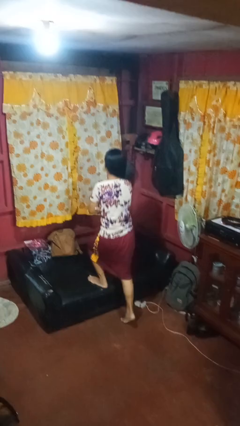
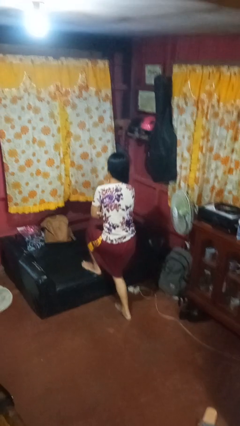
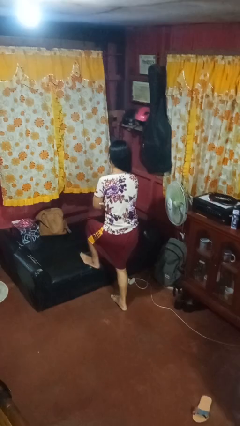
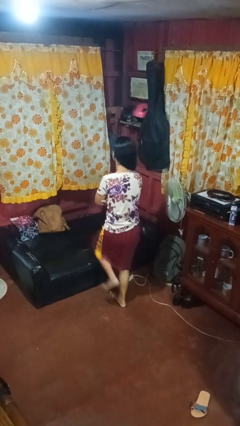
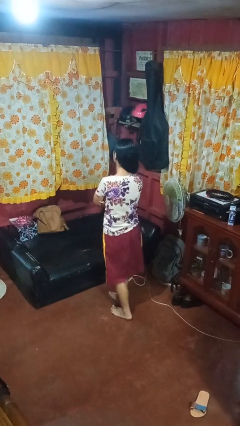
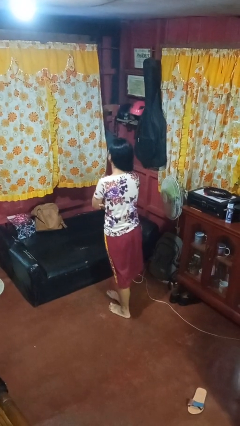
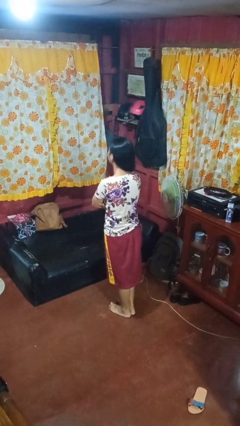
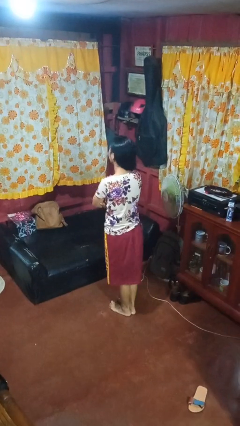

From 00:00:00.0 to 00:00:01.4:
person climbs off couch

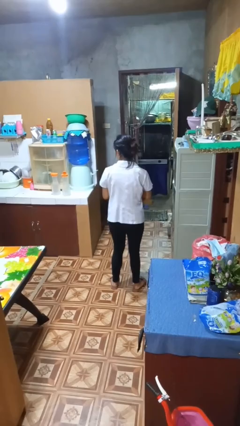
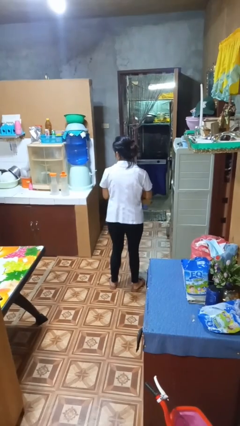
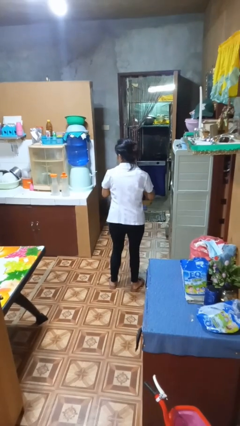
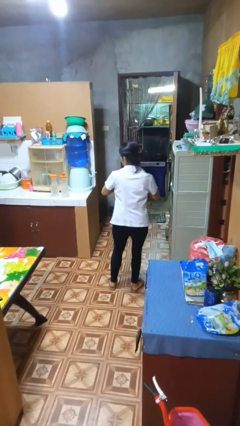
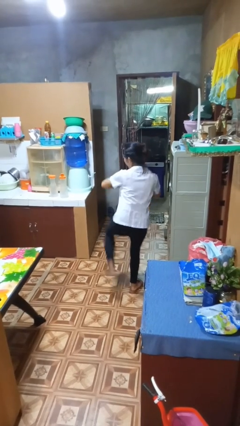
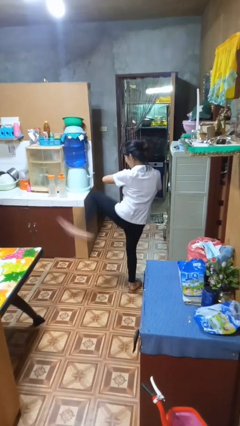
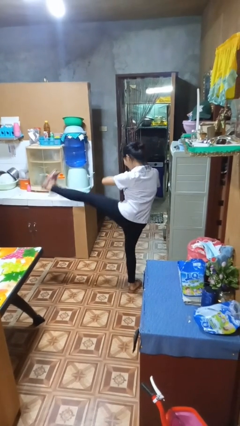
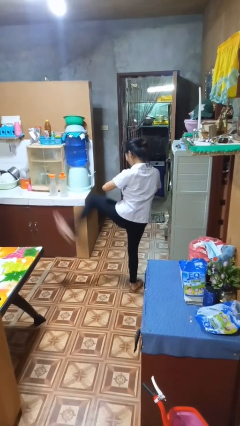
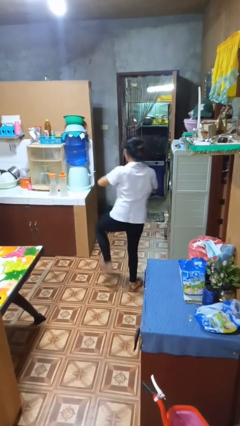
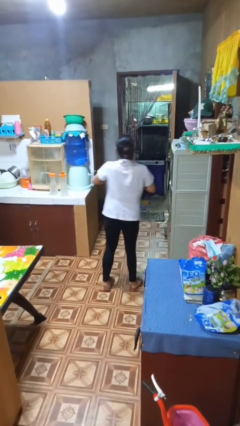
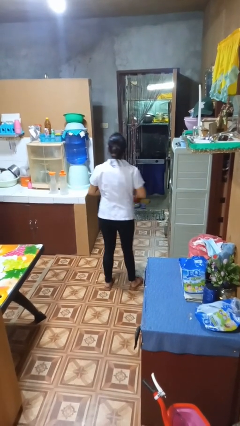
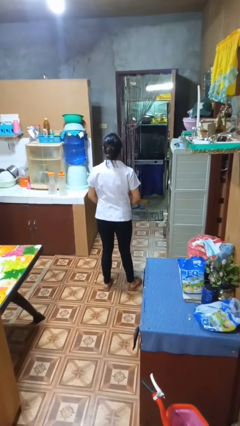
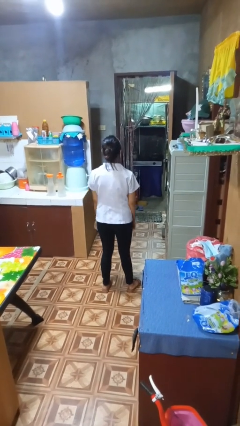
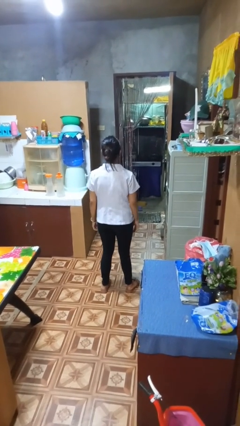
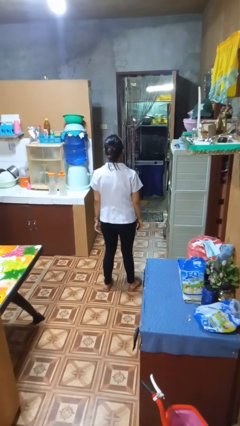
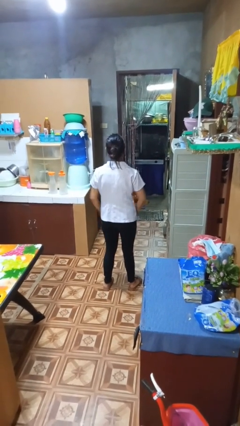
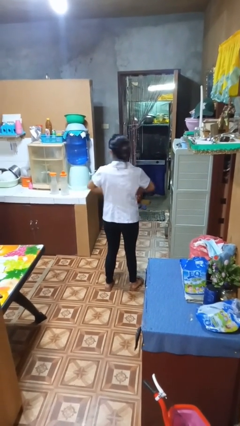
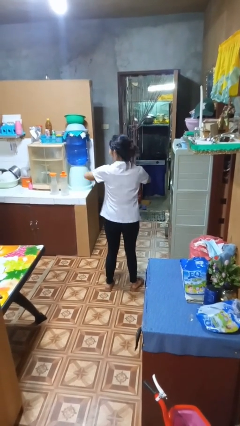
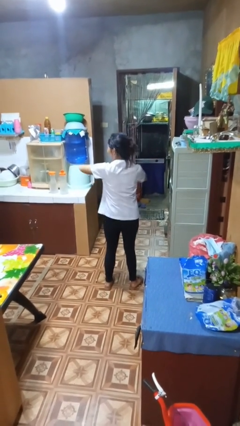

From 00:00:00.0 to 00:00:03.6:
person karate kicks

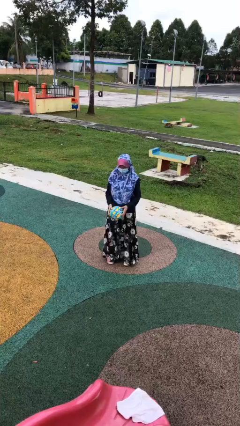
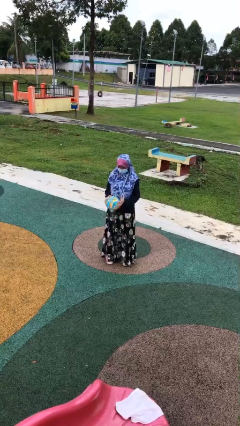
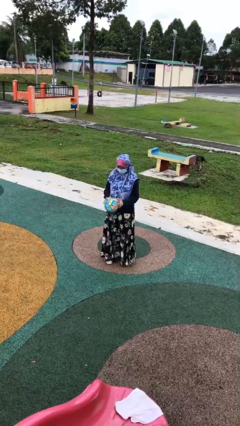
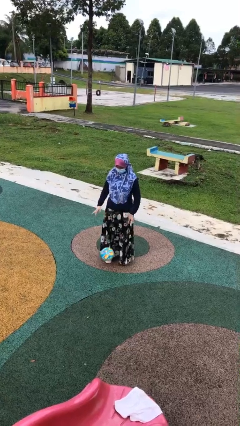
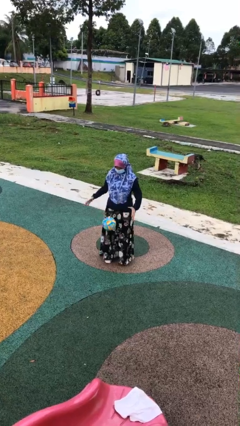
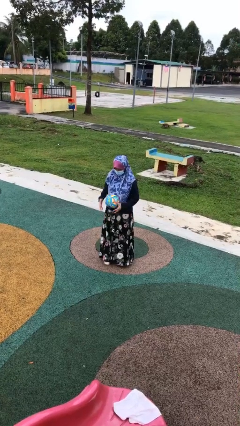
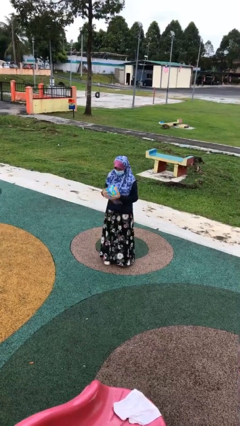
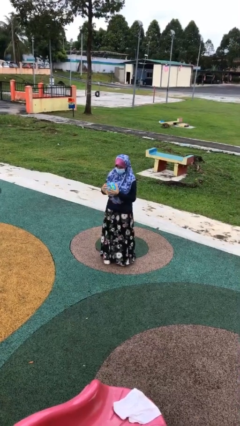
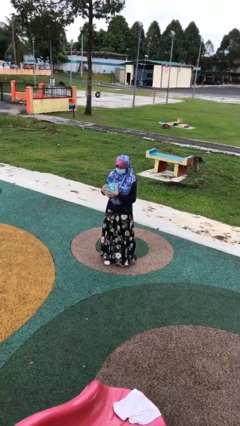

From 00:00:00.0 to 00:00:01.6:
person bounces ball on floor

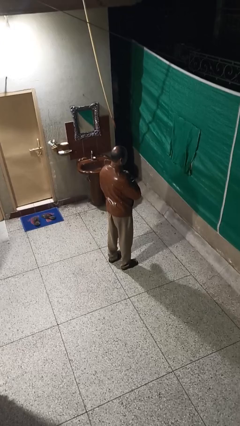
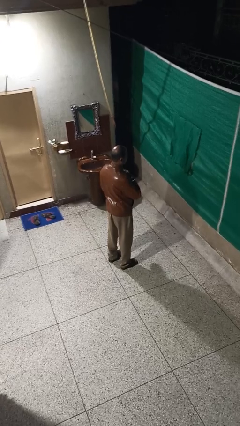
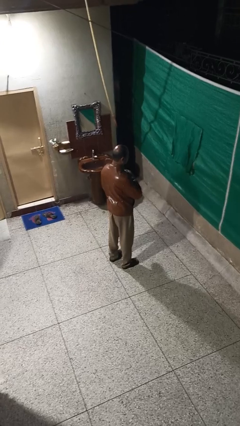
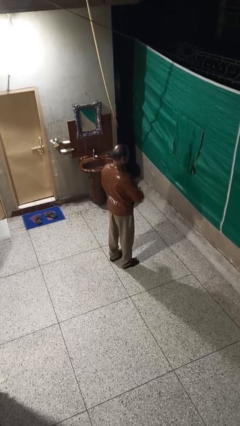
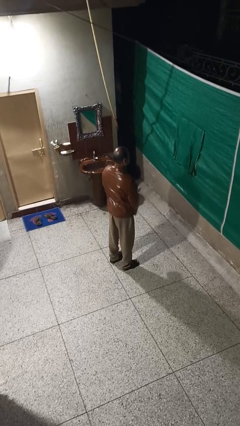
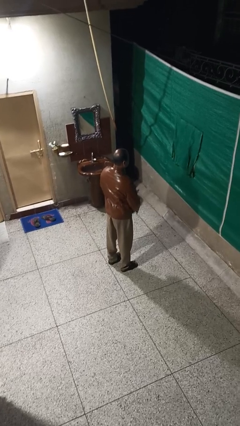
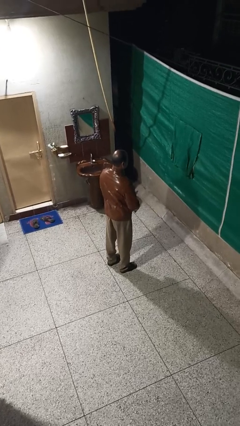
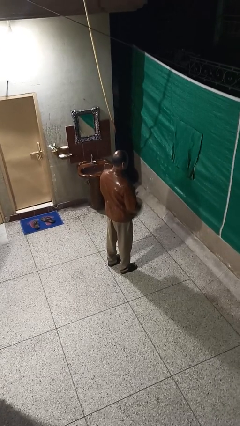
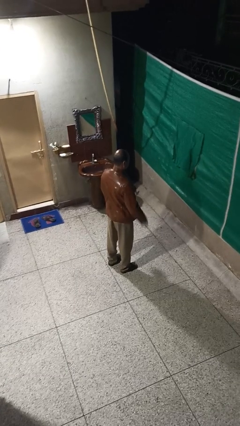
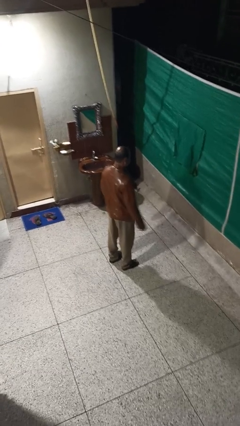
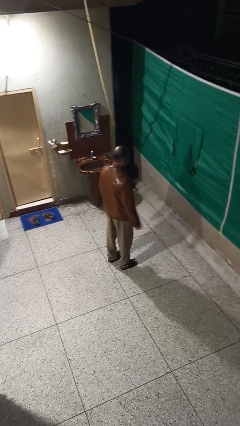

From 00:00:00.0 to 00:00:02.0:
person unzips jacket

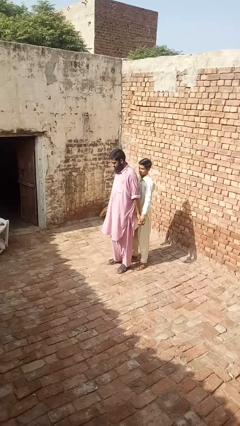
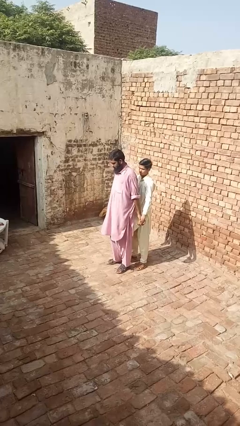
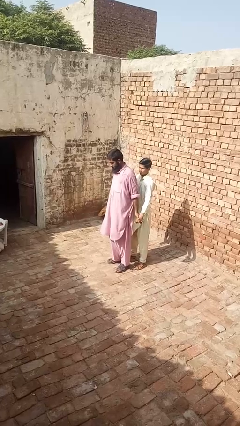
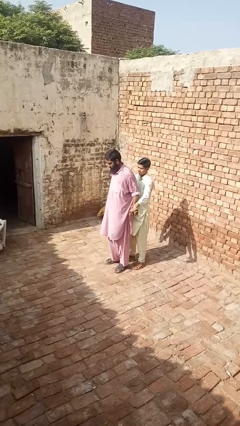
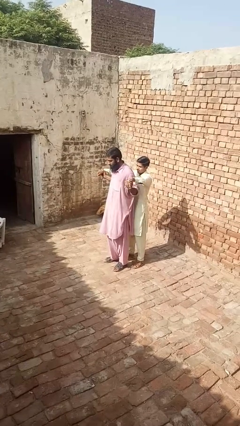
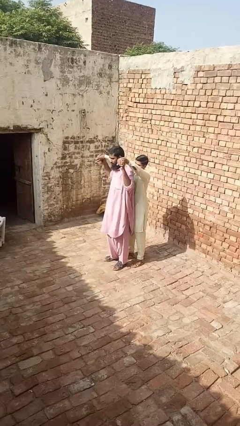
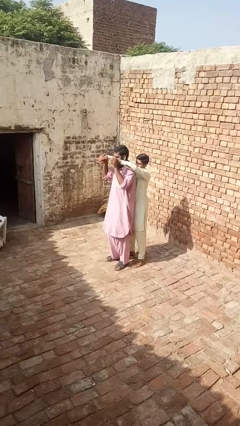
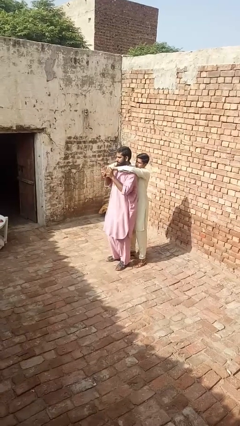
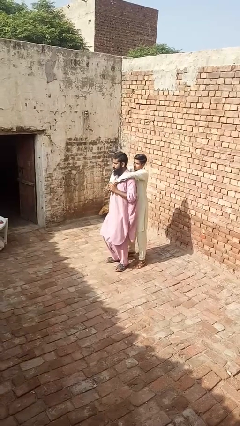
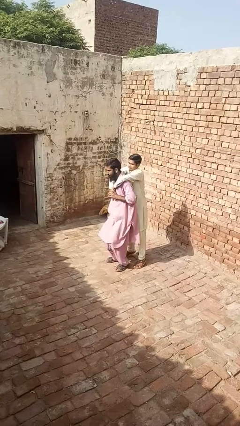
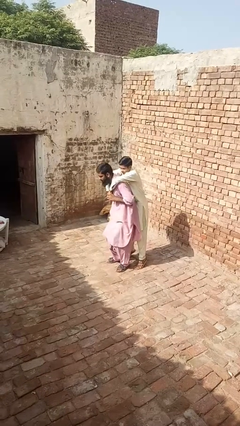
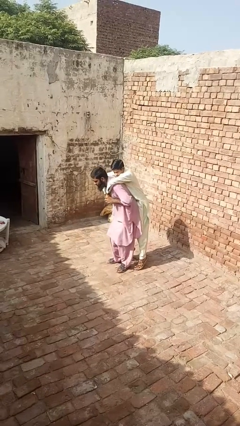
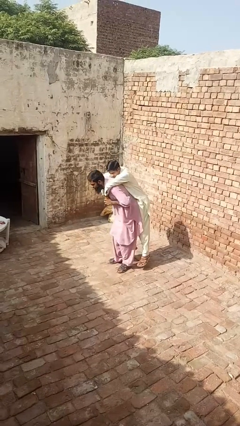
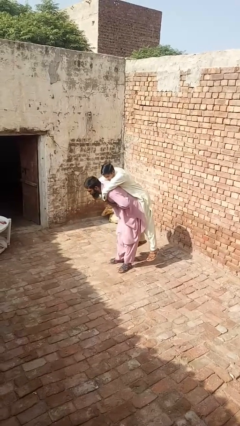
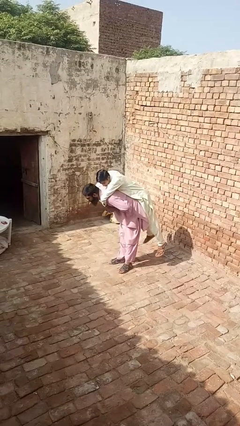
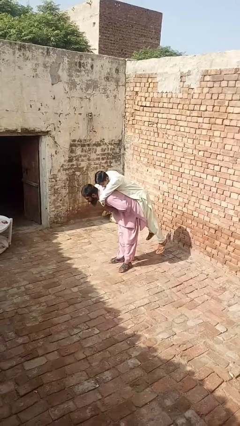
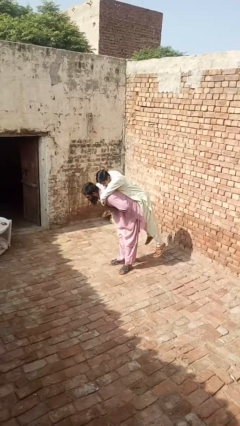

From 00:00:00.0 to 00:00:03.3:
person carries person over shoulder

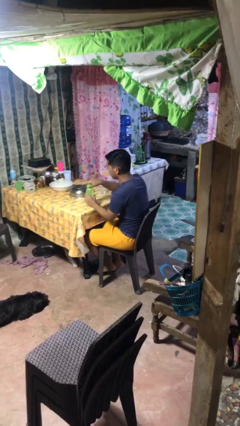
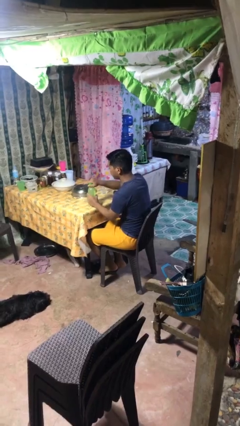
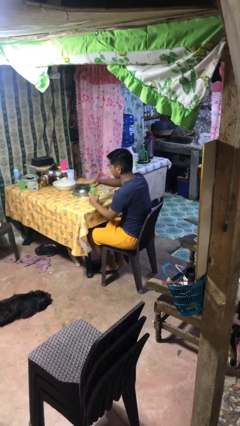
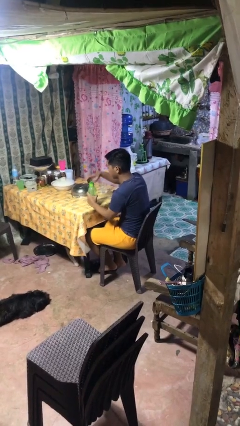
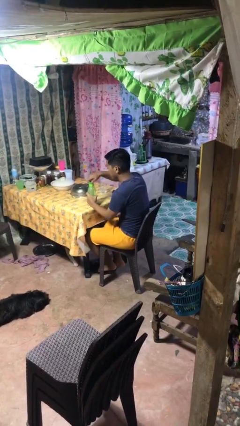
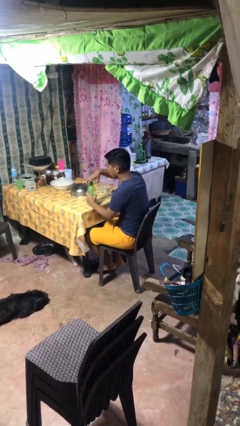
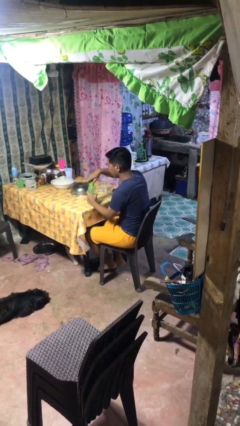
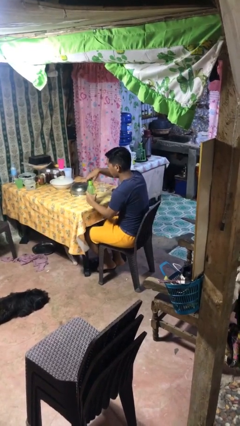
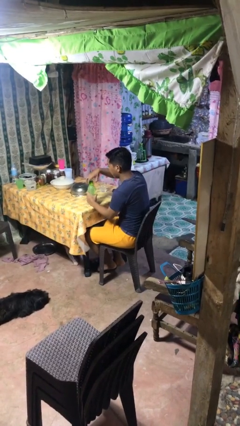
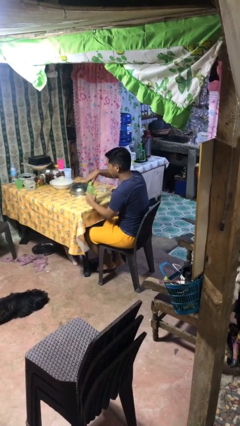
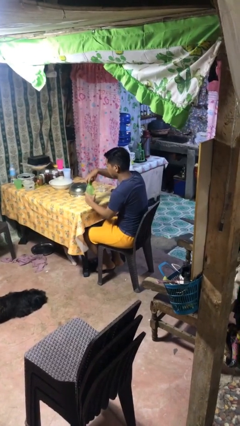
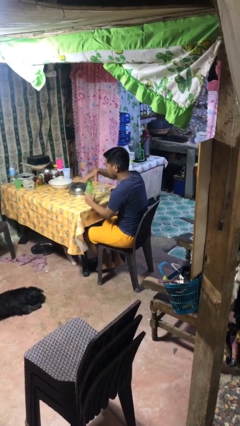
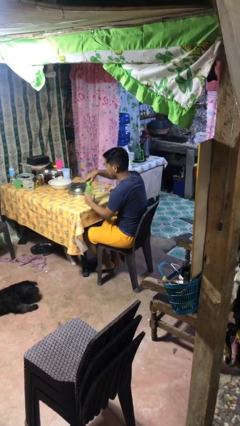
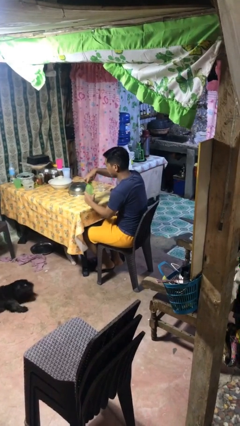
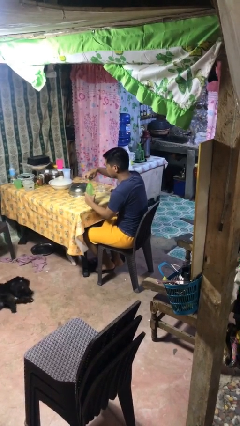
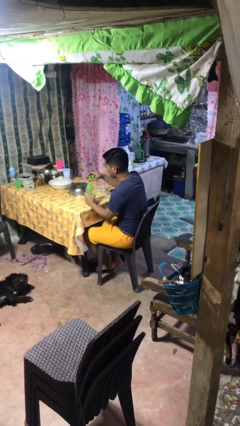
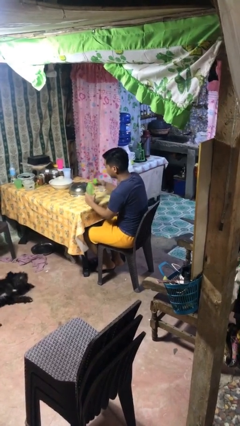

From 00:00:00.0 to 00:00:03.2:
person unscrews lid from bottle

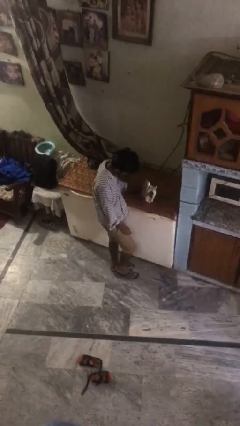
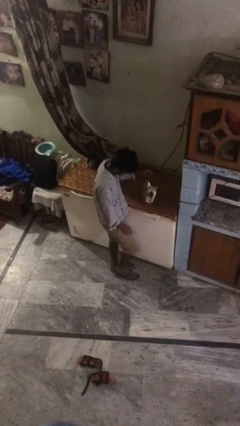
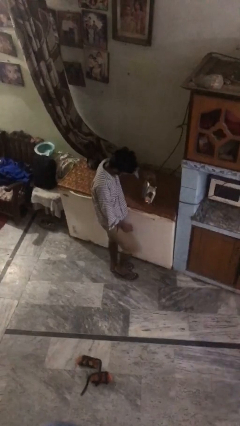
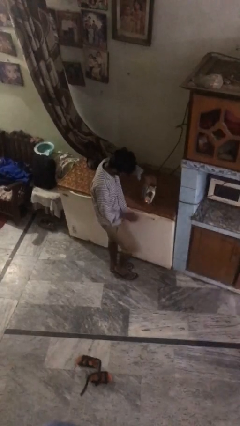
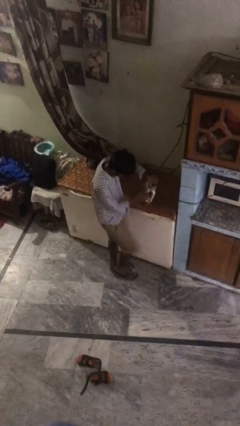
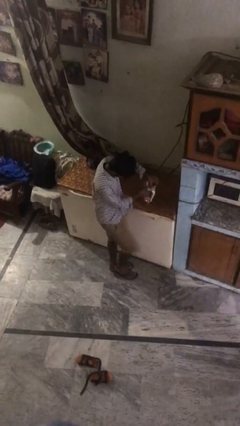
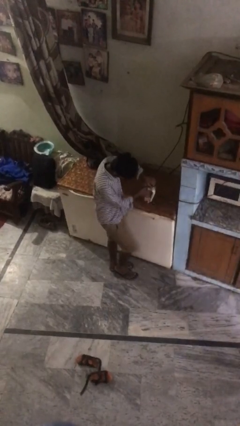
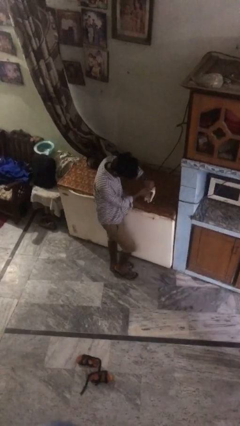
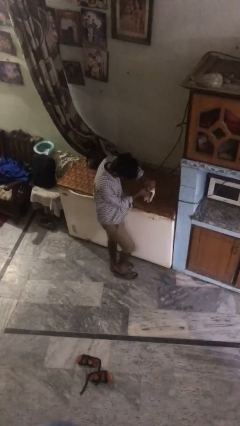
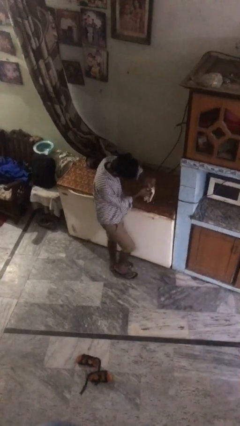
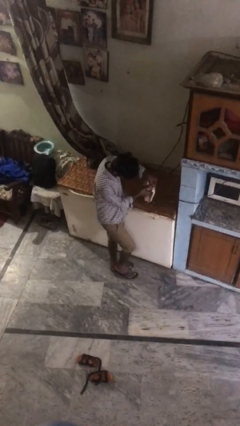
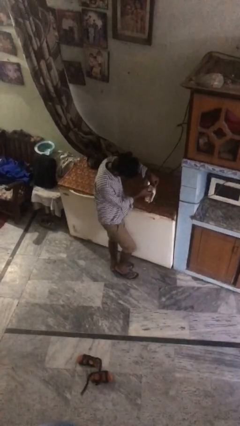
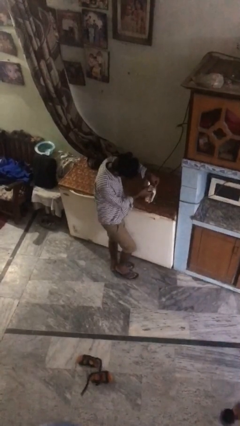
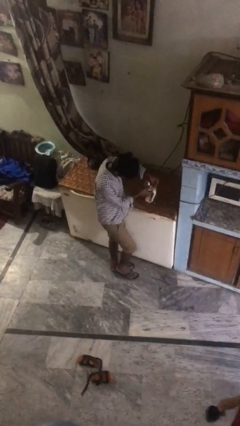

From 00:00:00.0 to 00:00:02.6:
person adjusts thermostat
